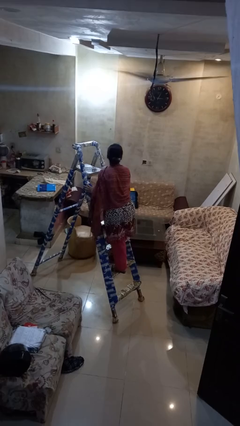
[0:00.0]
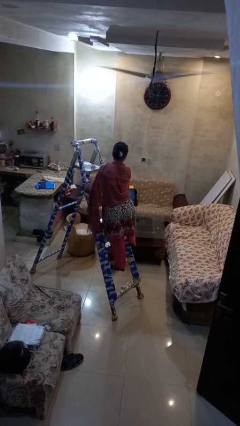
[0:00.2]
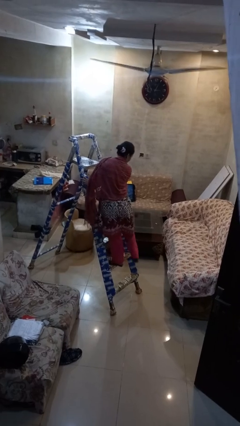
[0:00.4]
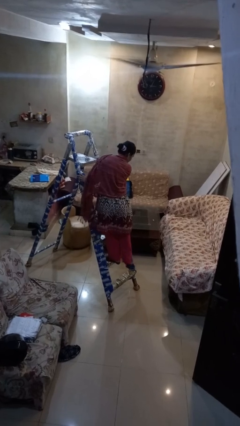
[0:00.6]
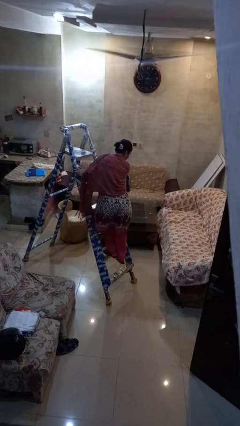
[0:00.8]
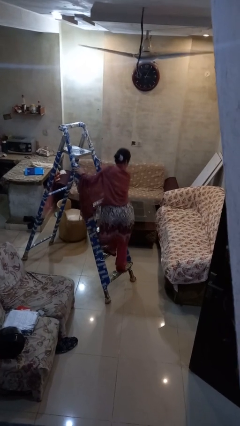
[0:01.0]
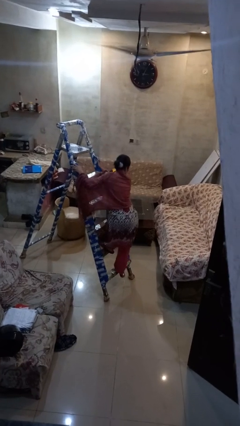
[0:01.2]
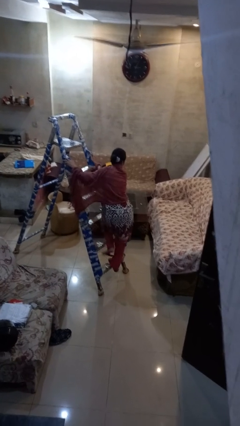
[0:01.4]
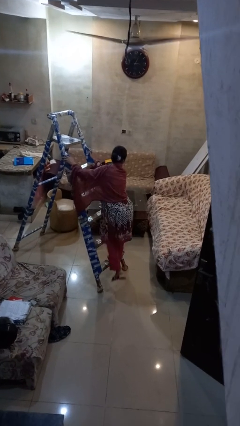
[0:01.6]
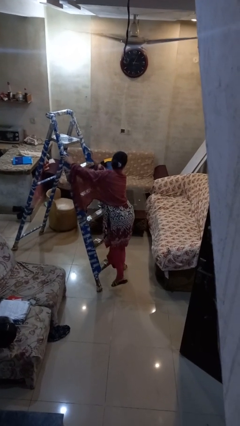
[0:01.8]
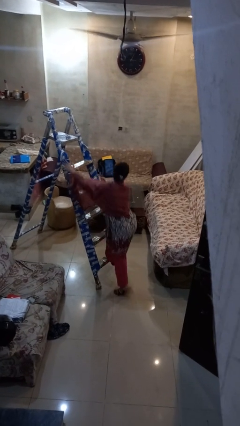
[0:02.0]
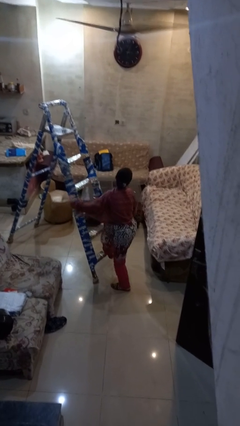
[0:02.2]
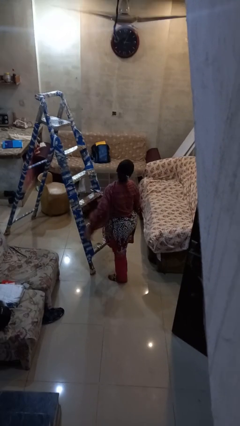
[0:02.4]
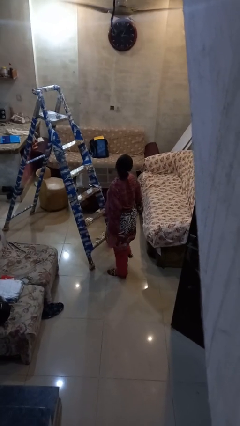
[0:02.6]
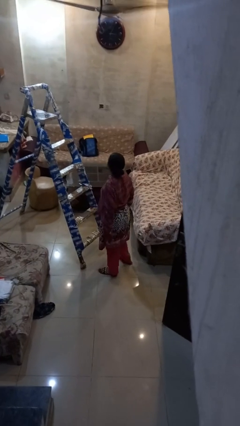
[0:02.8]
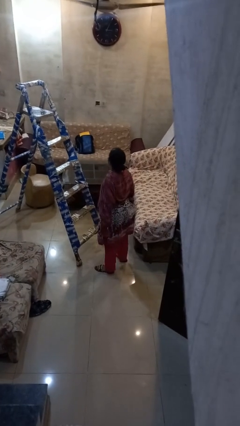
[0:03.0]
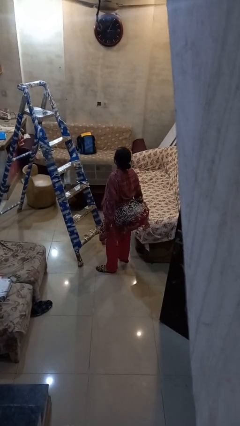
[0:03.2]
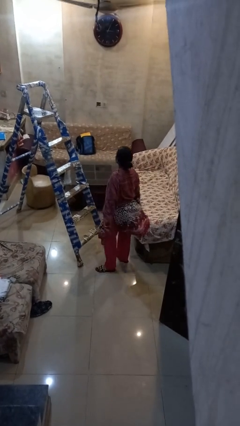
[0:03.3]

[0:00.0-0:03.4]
person climbs down ladder

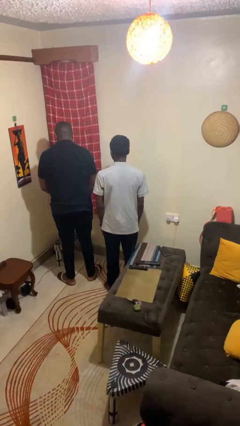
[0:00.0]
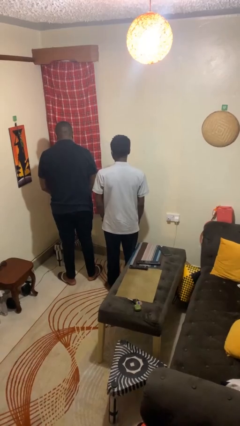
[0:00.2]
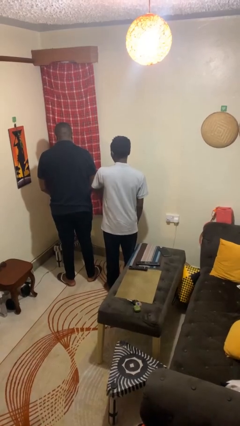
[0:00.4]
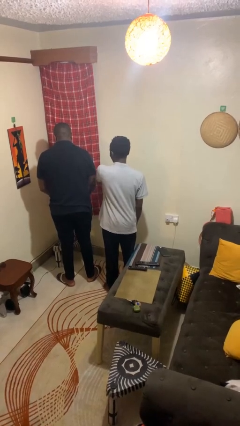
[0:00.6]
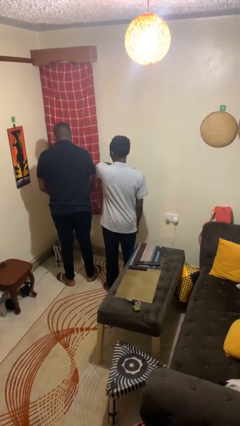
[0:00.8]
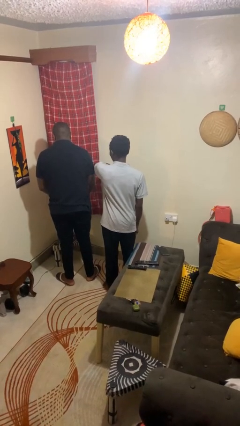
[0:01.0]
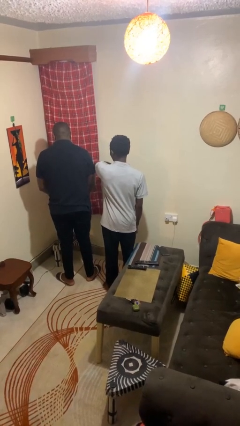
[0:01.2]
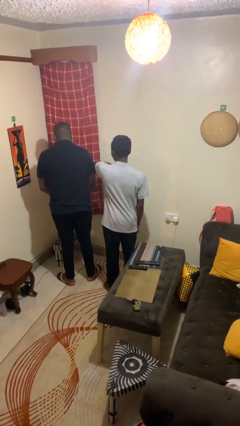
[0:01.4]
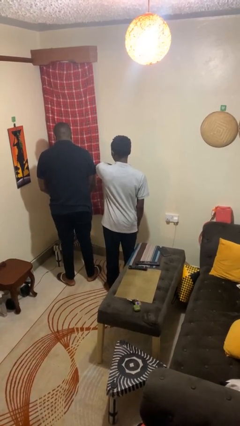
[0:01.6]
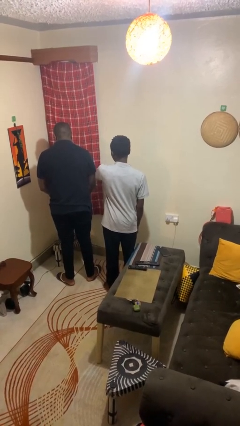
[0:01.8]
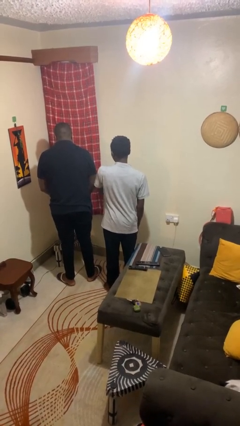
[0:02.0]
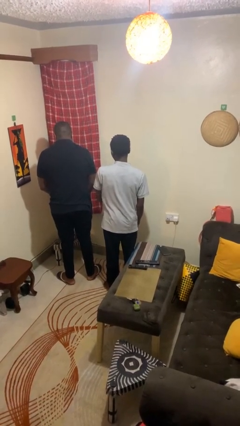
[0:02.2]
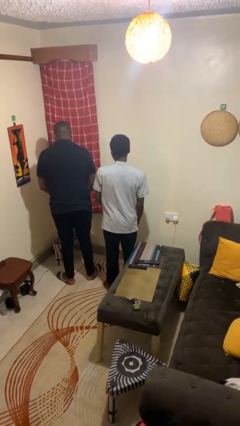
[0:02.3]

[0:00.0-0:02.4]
person nudges person with elbow

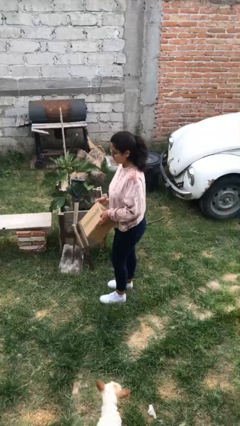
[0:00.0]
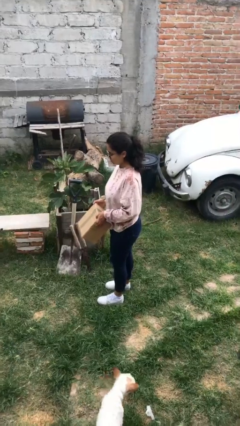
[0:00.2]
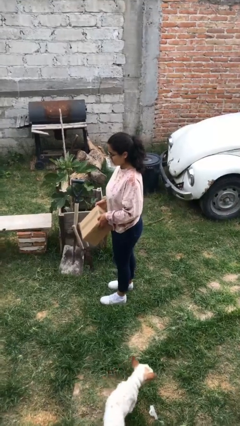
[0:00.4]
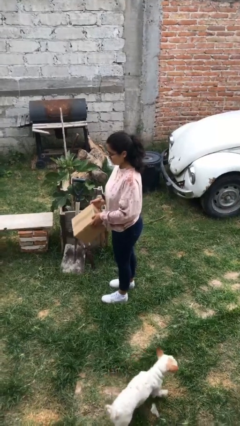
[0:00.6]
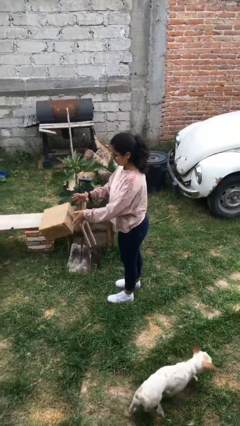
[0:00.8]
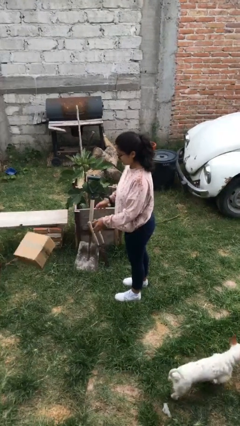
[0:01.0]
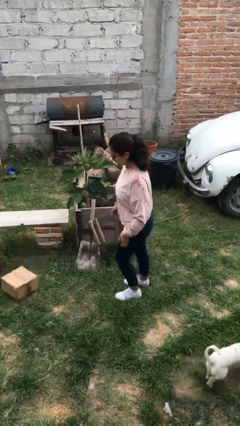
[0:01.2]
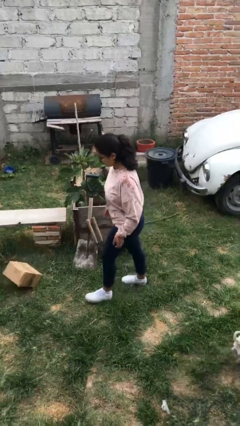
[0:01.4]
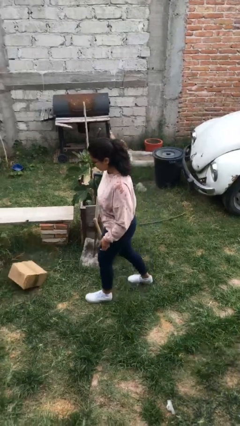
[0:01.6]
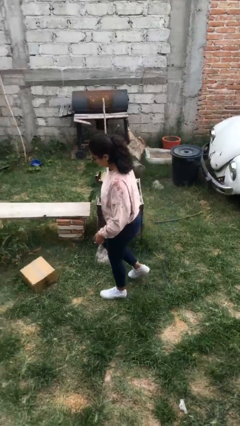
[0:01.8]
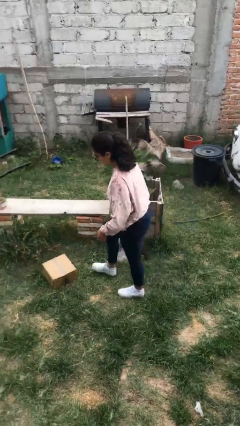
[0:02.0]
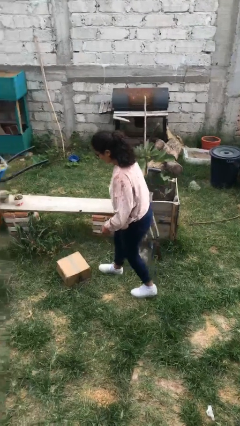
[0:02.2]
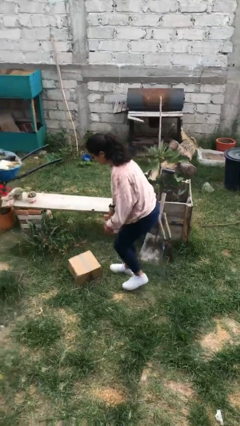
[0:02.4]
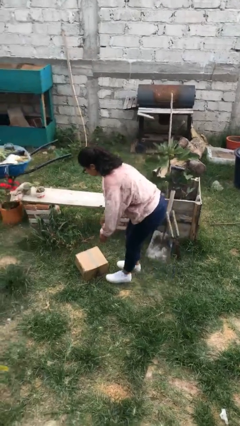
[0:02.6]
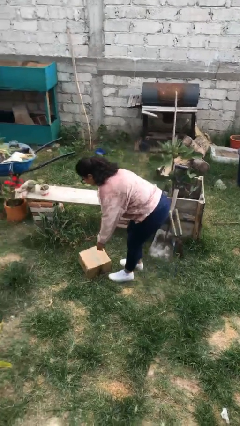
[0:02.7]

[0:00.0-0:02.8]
person throws object to ground

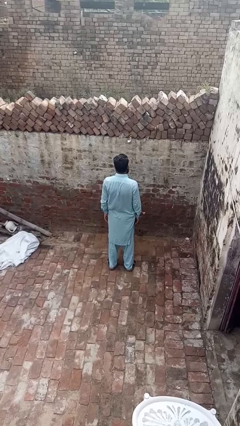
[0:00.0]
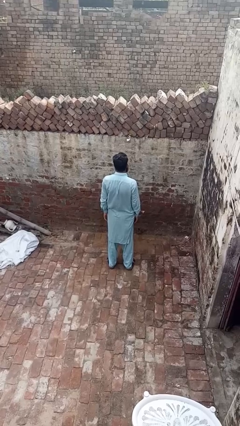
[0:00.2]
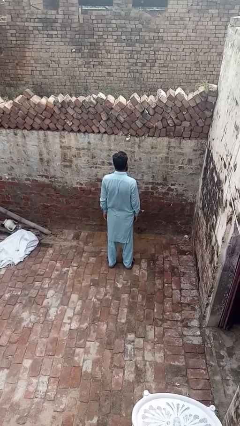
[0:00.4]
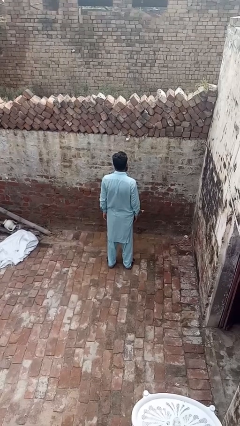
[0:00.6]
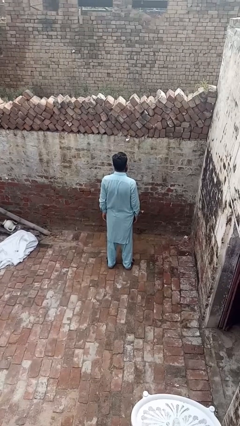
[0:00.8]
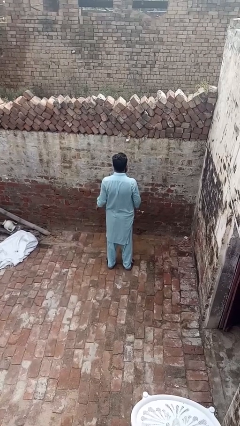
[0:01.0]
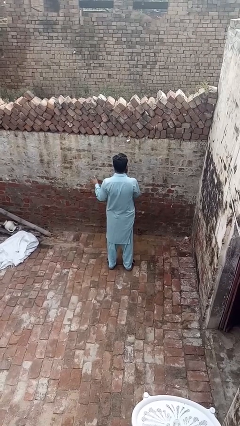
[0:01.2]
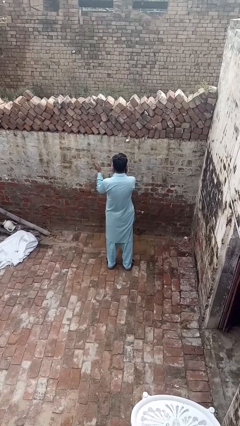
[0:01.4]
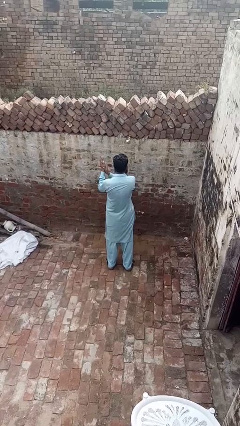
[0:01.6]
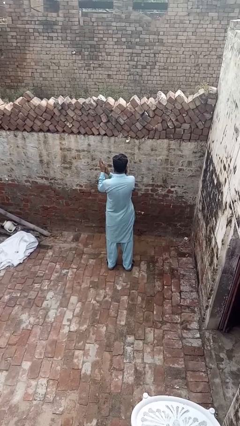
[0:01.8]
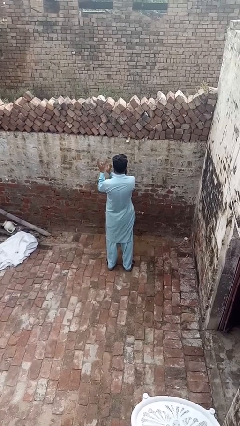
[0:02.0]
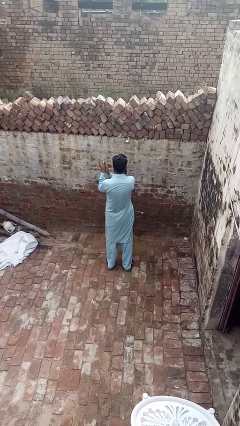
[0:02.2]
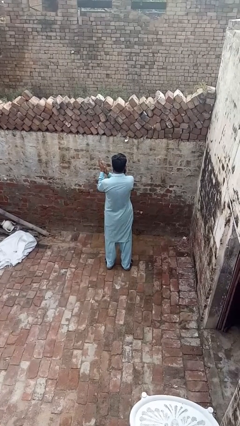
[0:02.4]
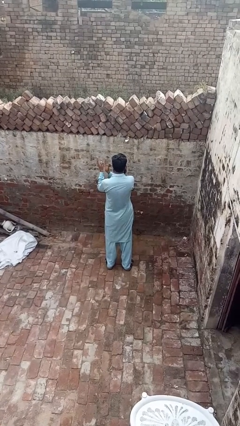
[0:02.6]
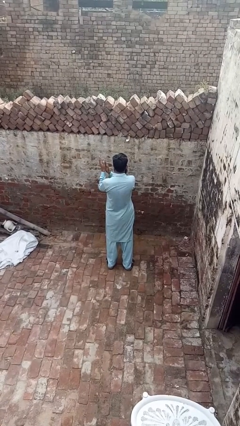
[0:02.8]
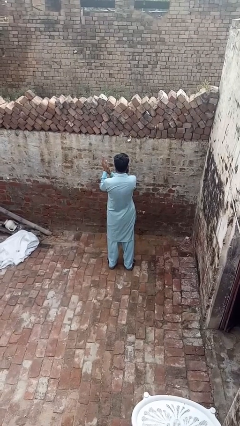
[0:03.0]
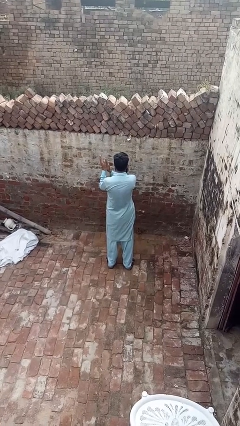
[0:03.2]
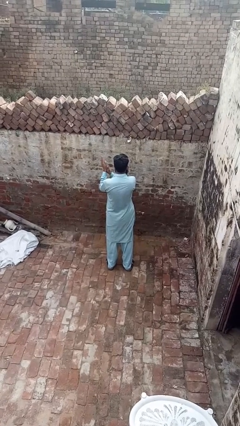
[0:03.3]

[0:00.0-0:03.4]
person claps hands

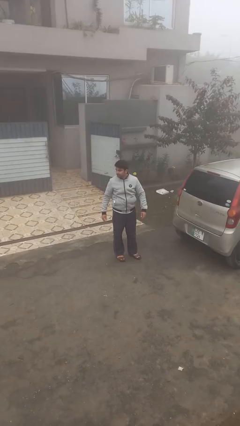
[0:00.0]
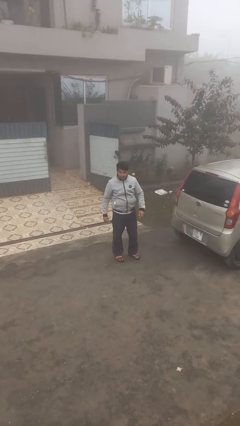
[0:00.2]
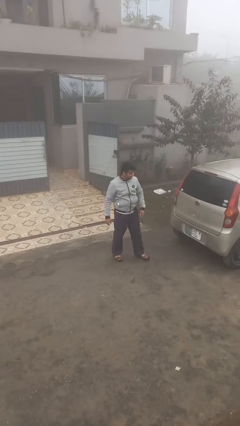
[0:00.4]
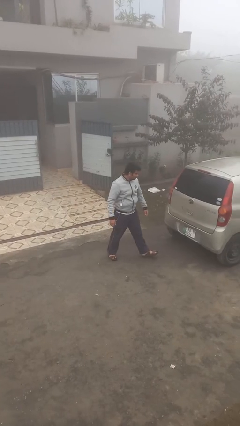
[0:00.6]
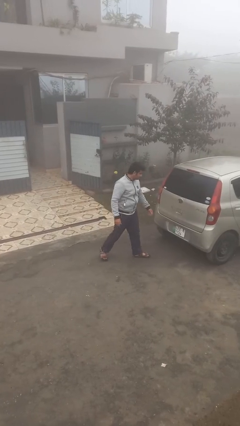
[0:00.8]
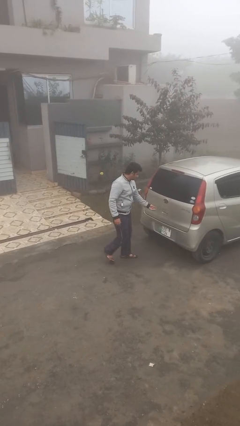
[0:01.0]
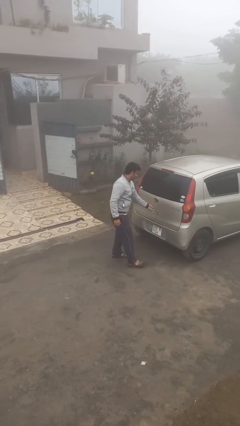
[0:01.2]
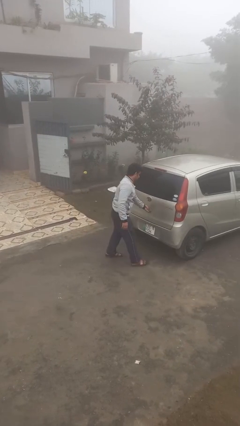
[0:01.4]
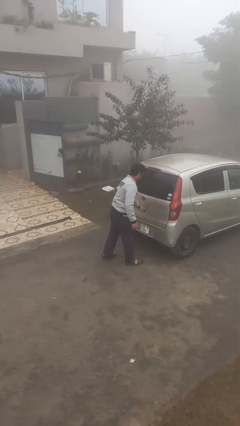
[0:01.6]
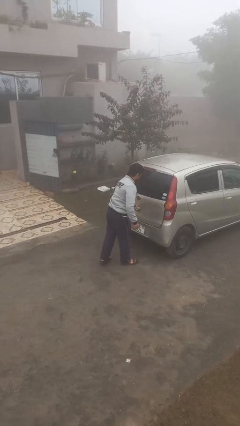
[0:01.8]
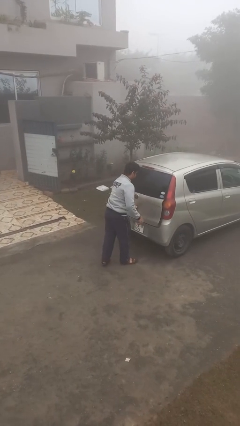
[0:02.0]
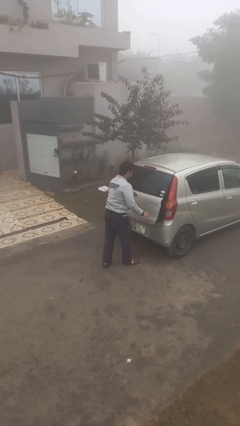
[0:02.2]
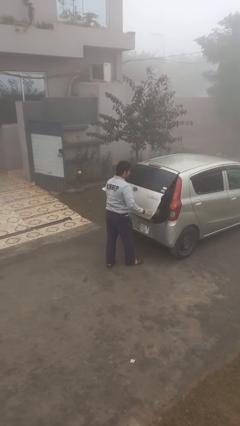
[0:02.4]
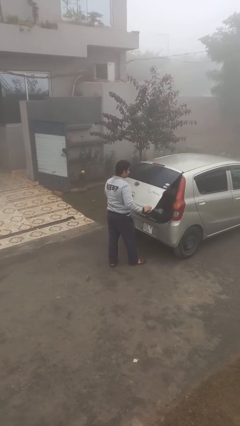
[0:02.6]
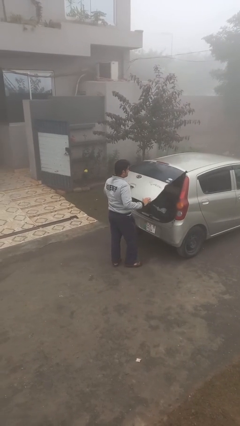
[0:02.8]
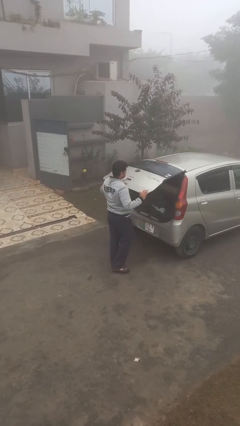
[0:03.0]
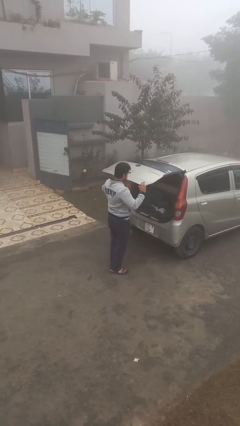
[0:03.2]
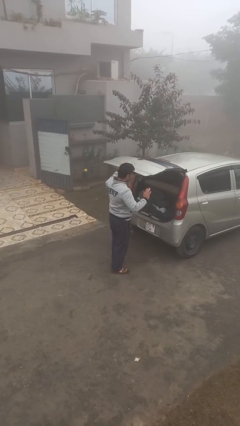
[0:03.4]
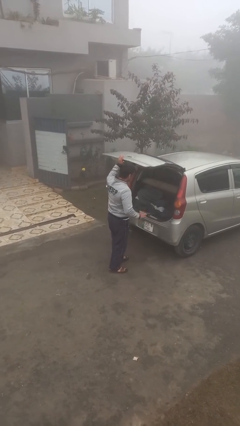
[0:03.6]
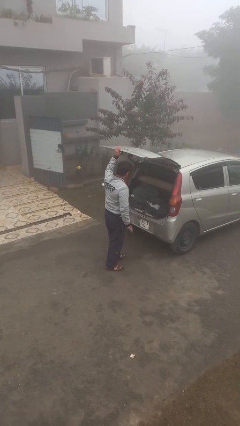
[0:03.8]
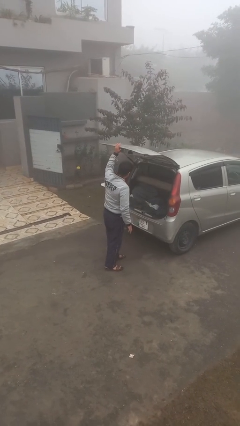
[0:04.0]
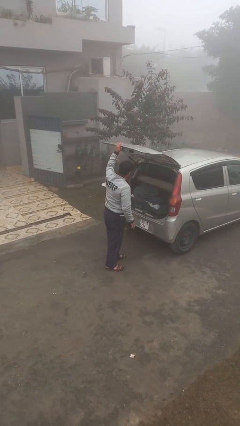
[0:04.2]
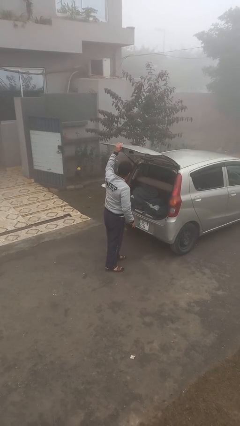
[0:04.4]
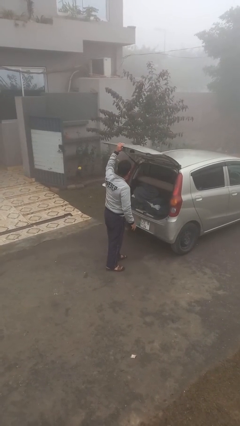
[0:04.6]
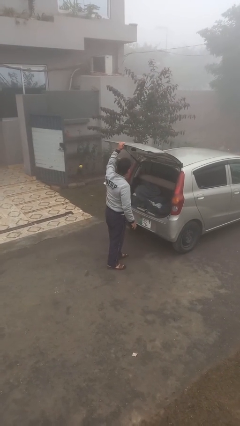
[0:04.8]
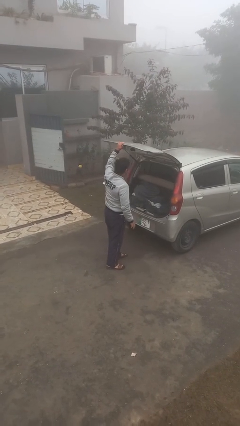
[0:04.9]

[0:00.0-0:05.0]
person opens car trunk

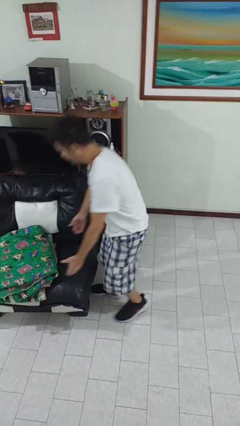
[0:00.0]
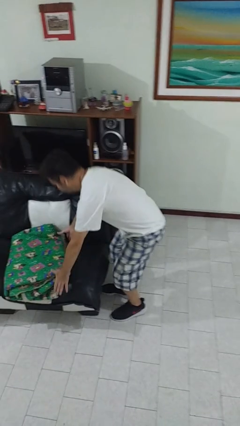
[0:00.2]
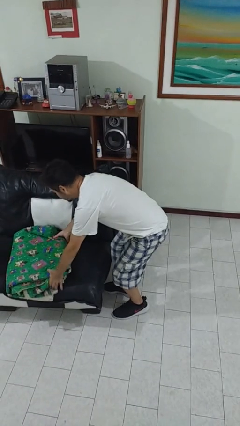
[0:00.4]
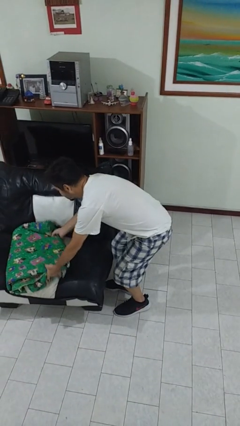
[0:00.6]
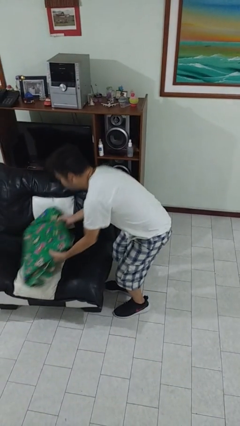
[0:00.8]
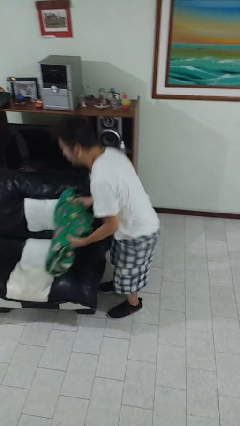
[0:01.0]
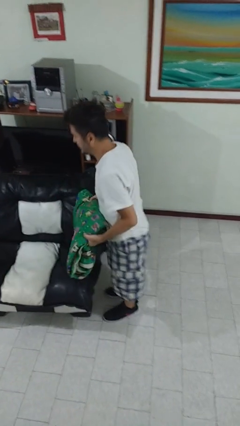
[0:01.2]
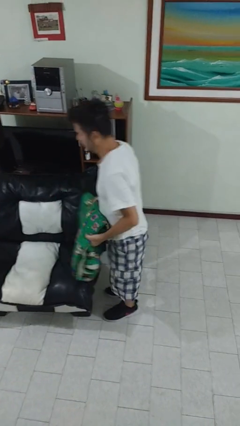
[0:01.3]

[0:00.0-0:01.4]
person picks up object from couch
